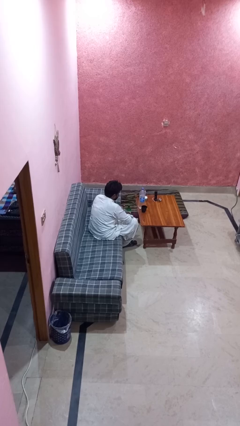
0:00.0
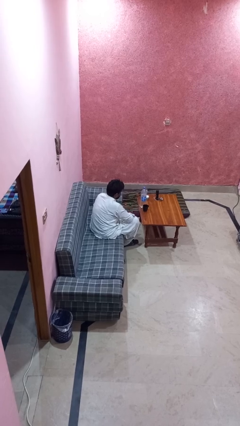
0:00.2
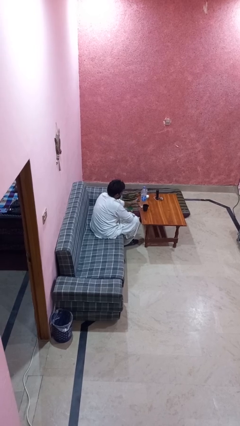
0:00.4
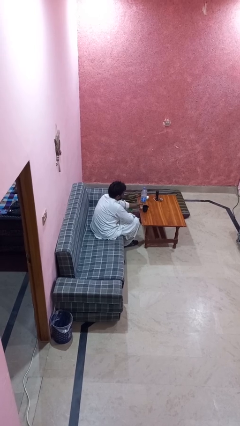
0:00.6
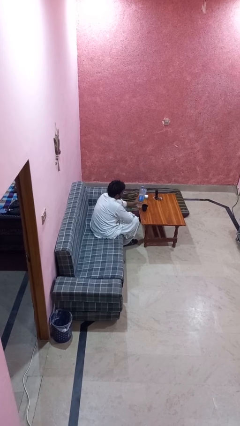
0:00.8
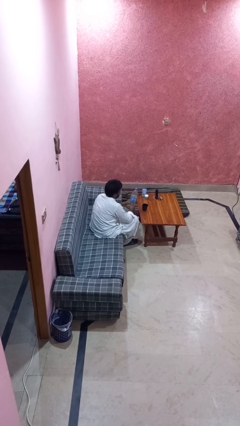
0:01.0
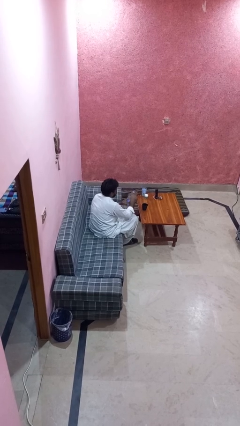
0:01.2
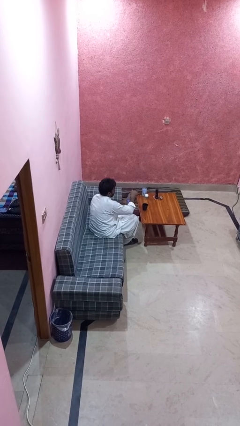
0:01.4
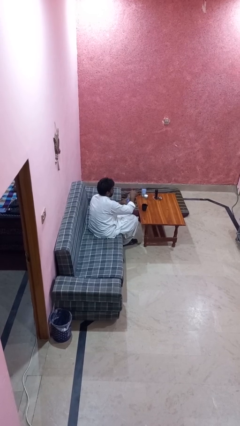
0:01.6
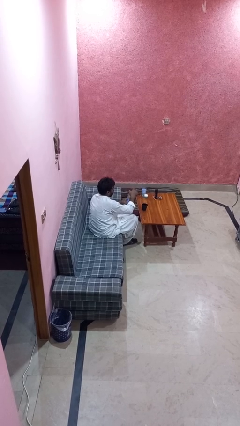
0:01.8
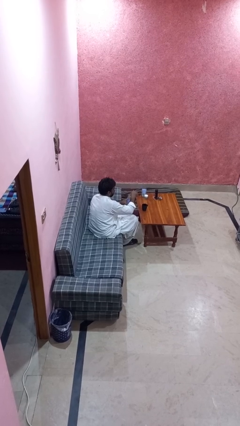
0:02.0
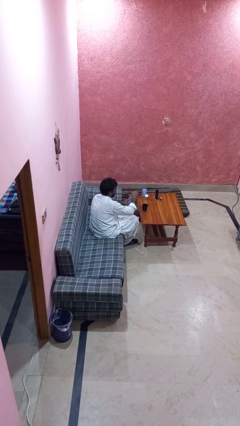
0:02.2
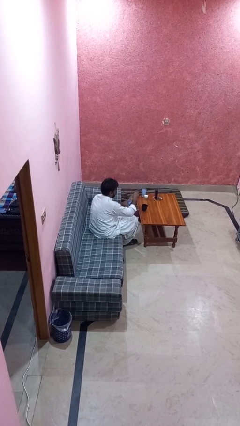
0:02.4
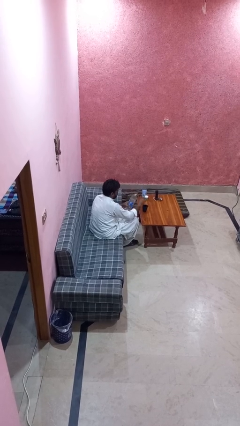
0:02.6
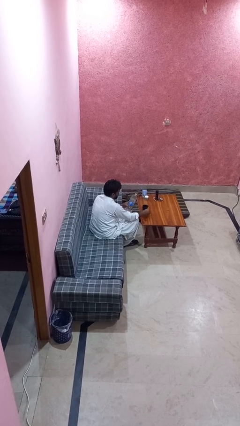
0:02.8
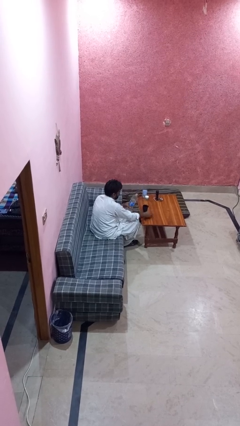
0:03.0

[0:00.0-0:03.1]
person unscrews lid from bottle

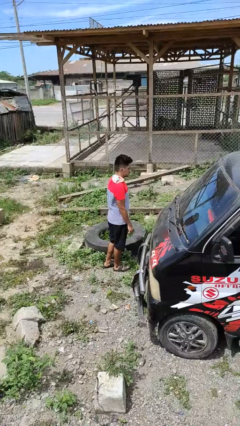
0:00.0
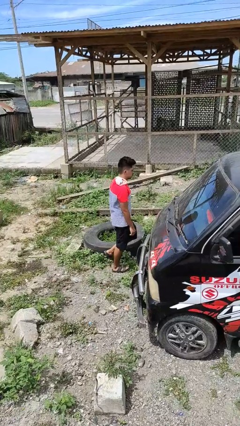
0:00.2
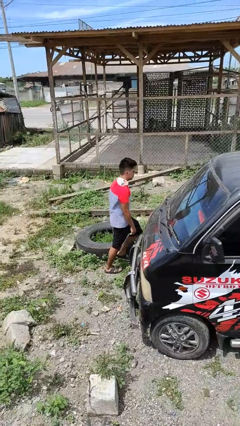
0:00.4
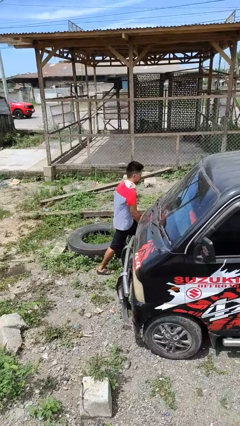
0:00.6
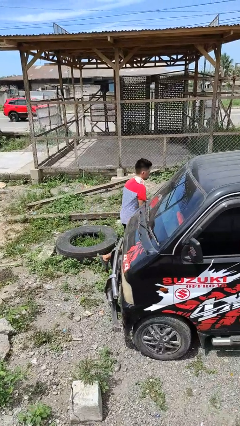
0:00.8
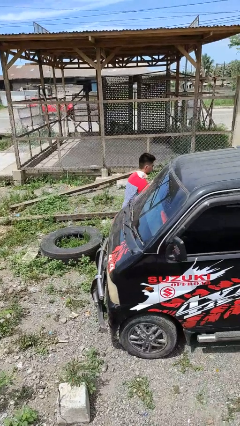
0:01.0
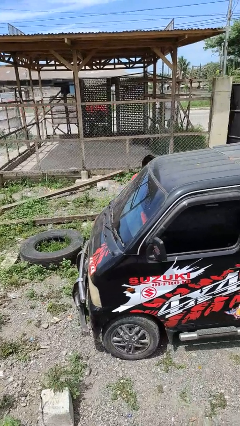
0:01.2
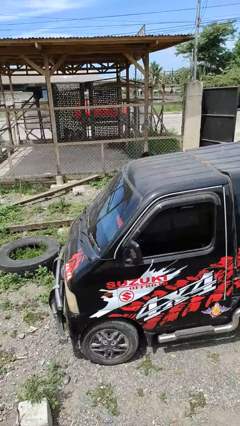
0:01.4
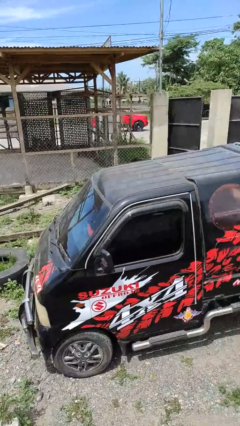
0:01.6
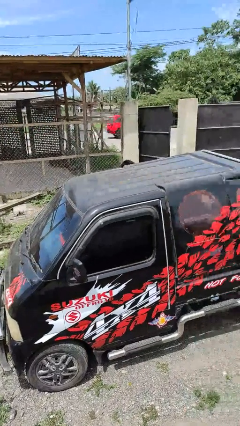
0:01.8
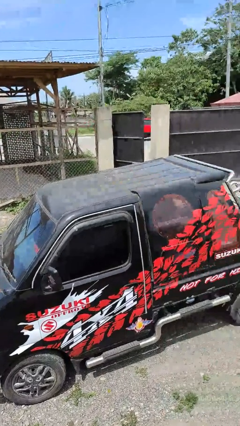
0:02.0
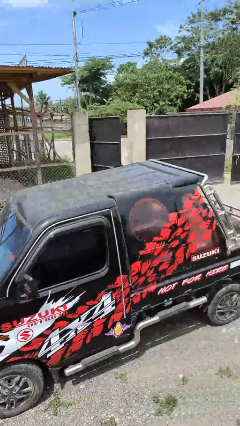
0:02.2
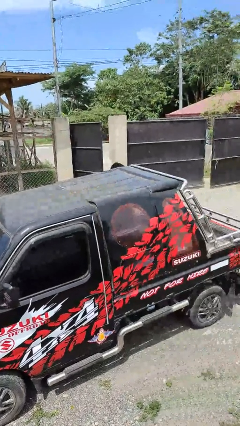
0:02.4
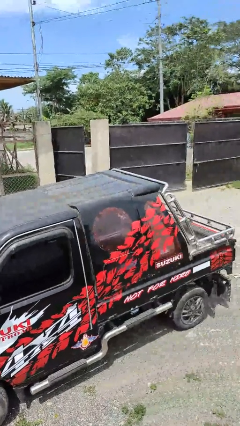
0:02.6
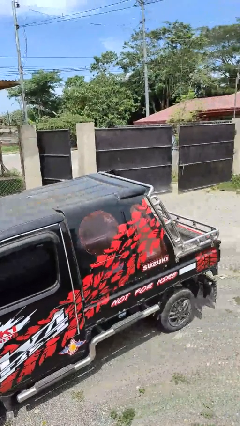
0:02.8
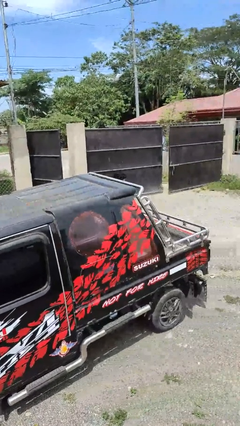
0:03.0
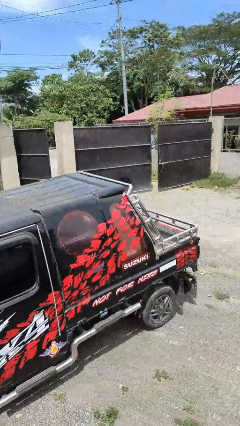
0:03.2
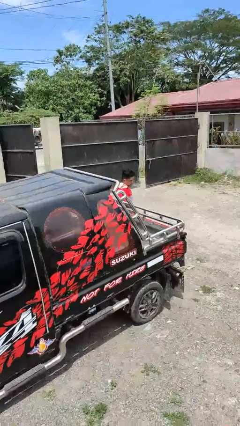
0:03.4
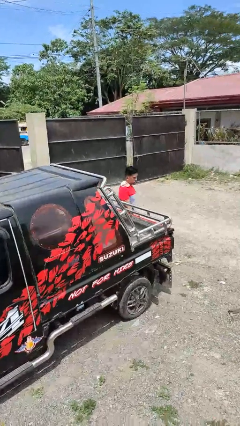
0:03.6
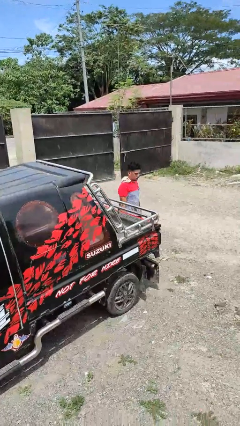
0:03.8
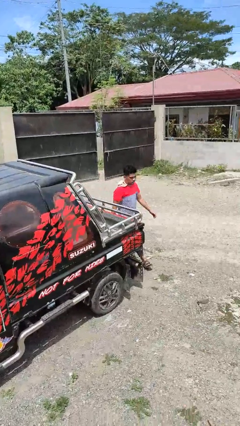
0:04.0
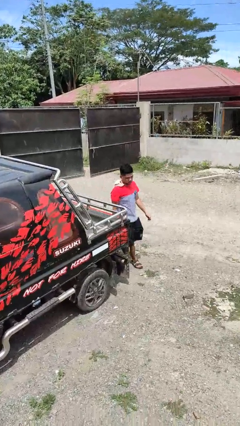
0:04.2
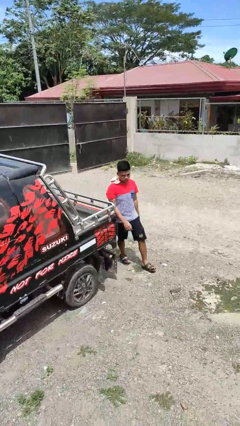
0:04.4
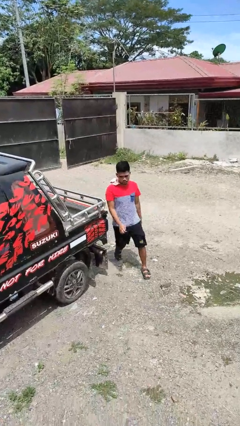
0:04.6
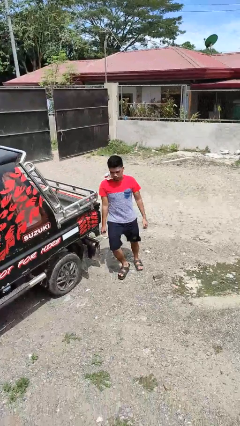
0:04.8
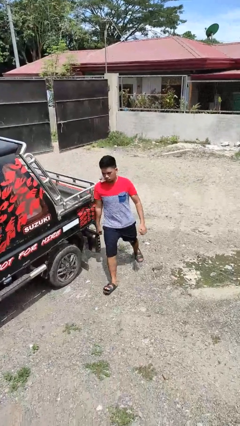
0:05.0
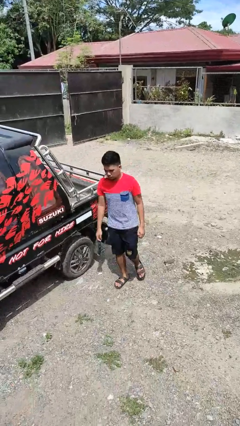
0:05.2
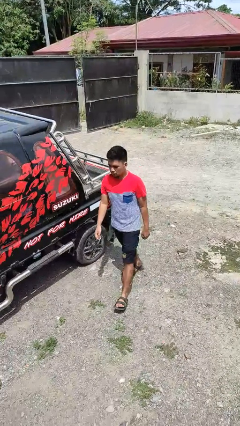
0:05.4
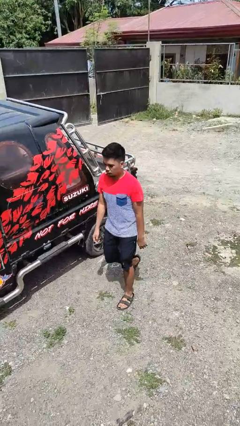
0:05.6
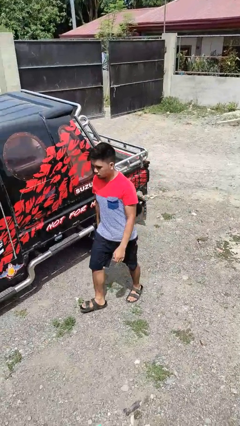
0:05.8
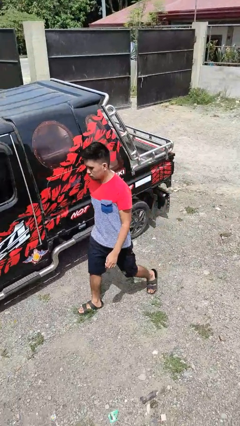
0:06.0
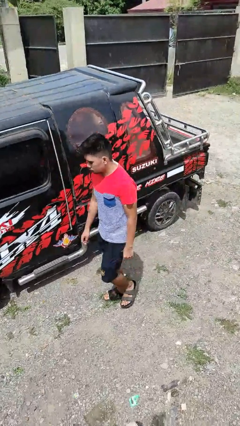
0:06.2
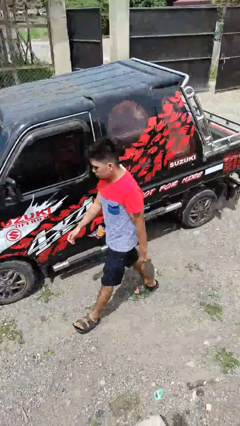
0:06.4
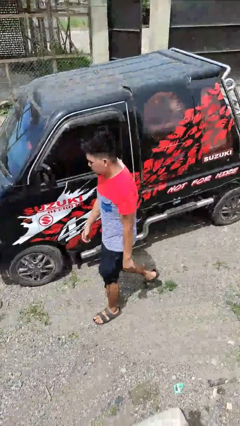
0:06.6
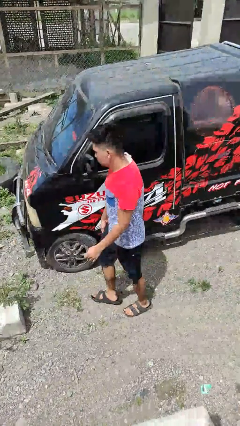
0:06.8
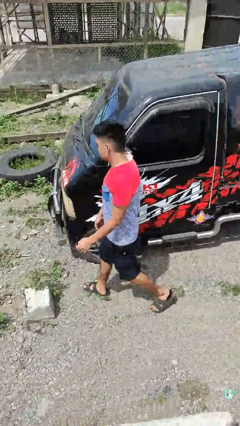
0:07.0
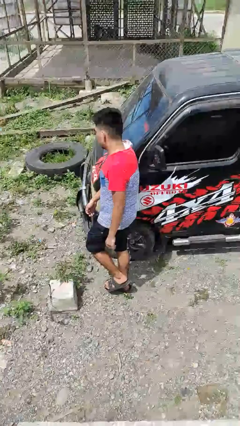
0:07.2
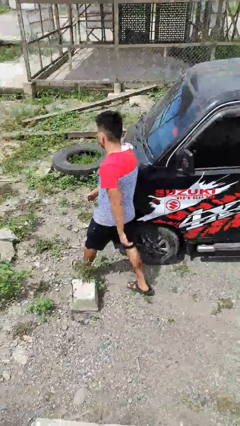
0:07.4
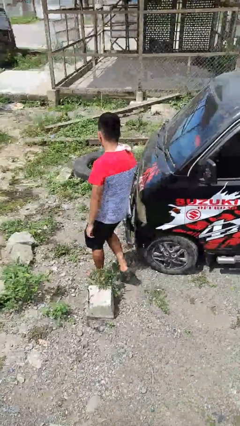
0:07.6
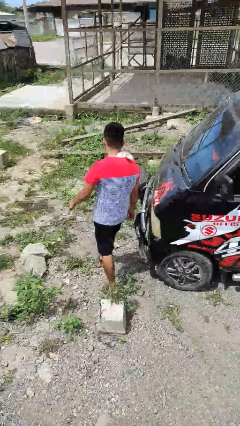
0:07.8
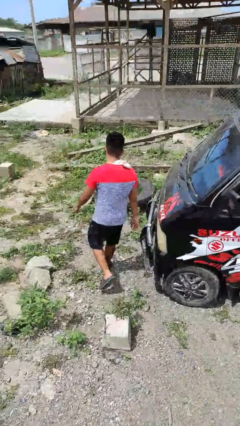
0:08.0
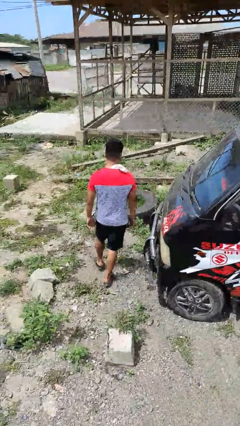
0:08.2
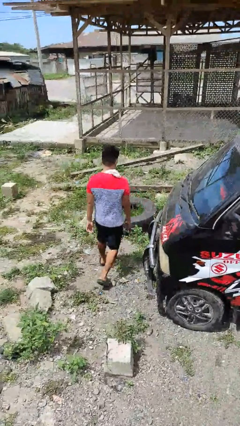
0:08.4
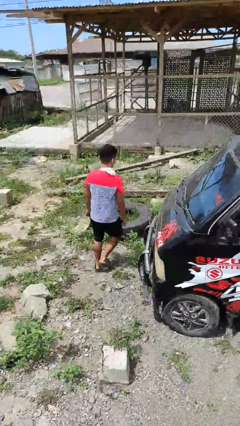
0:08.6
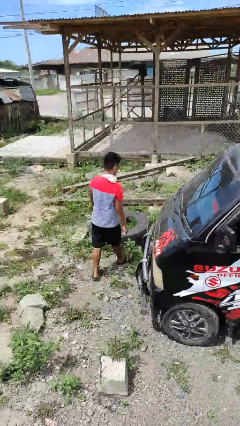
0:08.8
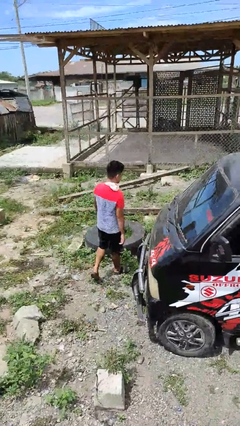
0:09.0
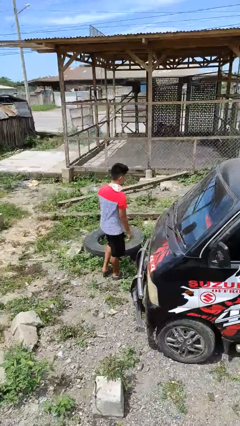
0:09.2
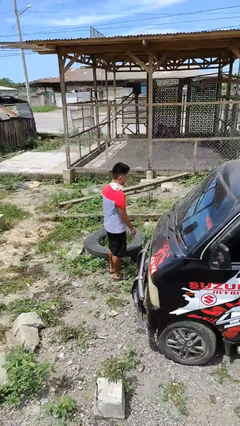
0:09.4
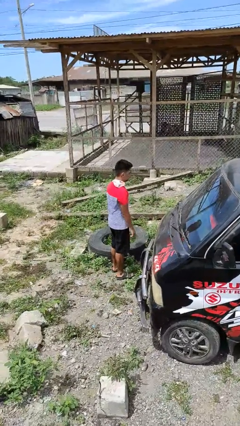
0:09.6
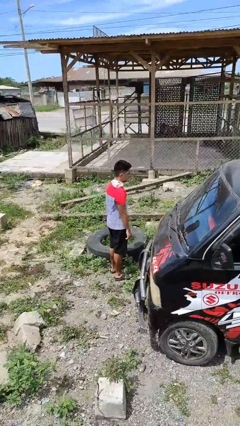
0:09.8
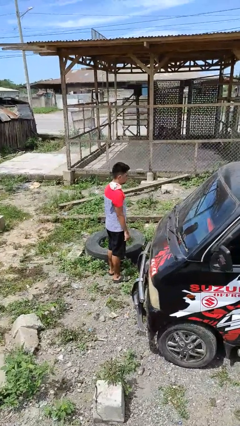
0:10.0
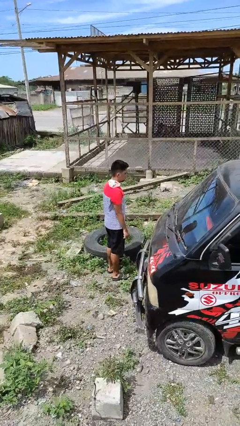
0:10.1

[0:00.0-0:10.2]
person walks around car

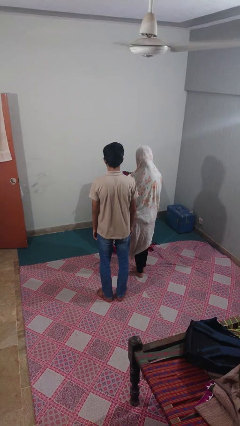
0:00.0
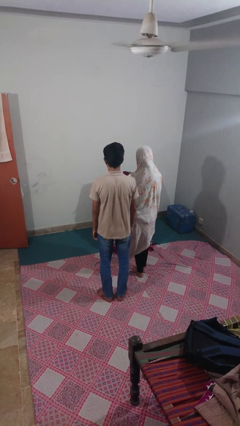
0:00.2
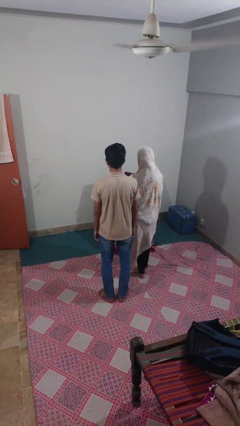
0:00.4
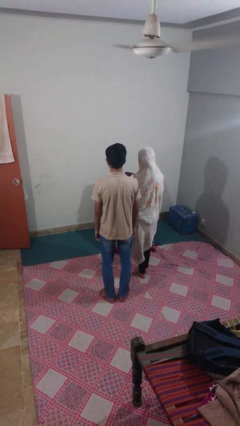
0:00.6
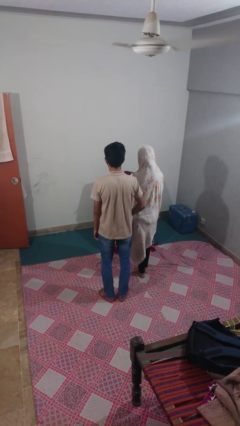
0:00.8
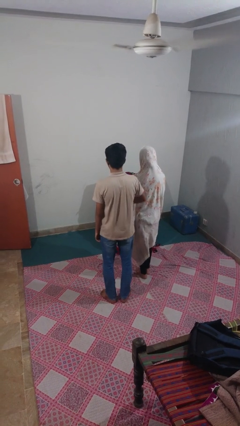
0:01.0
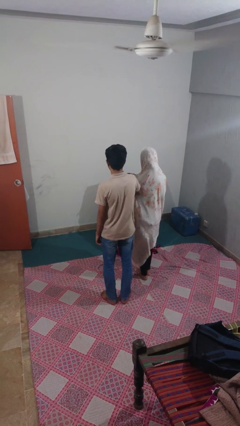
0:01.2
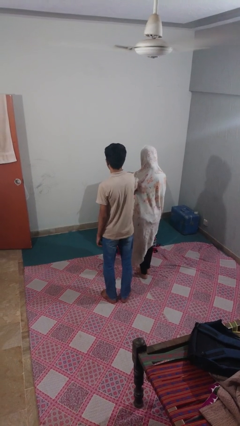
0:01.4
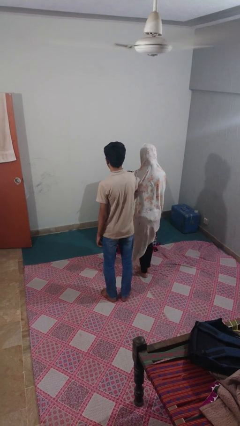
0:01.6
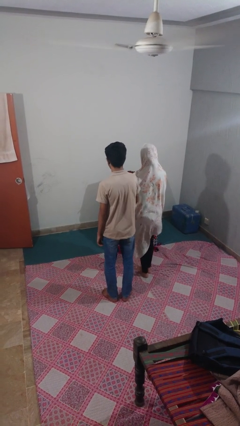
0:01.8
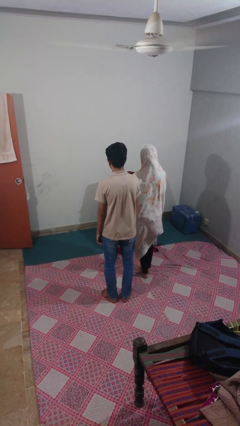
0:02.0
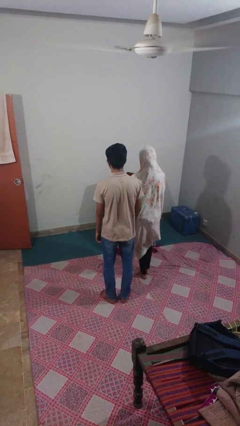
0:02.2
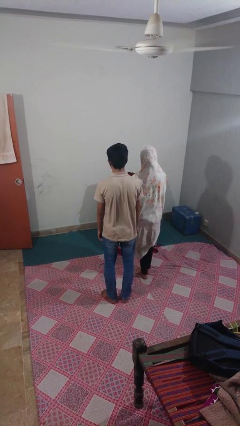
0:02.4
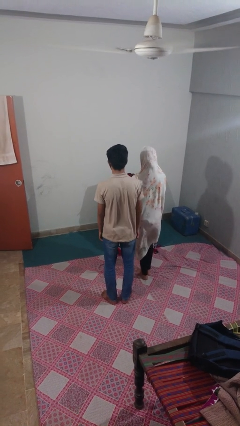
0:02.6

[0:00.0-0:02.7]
person nudges person with elbow

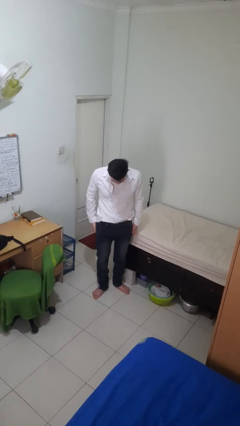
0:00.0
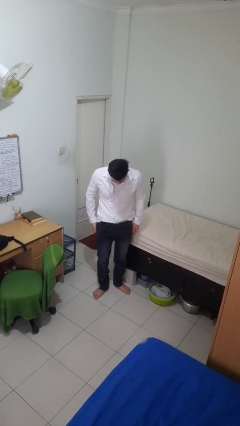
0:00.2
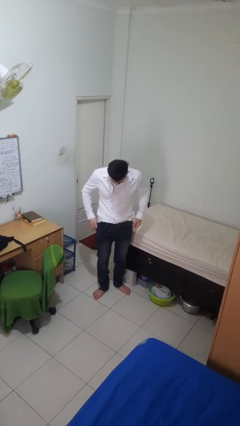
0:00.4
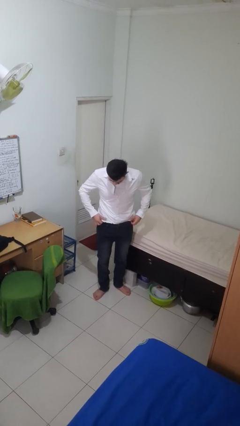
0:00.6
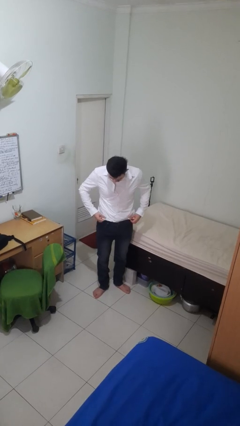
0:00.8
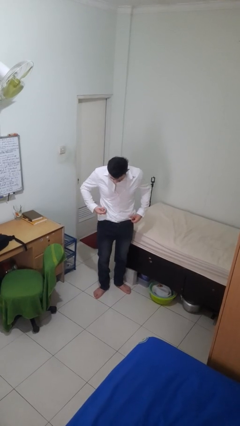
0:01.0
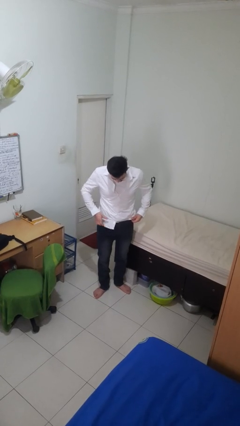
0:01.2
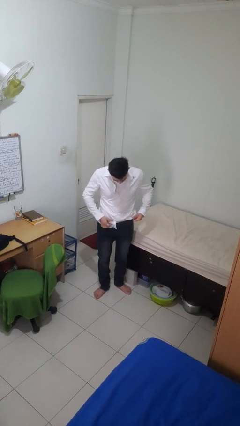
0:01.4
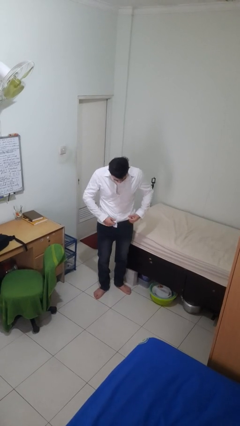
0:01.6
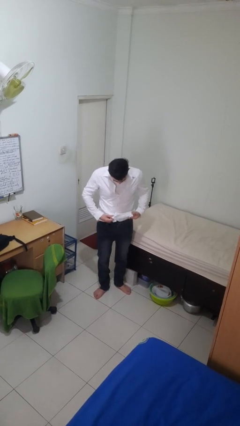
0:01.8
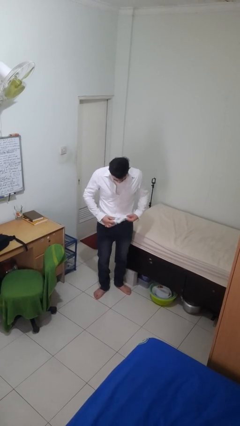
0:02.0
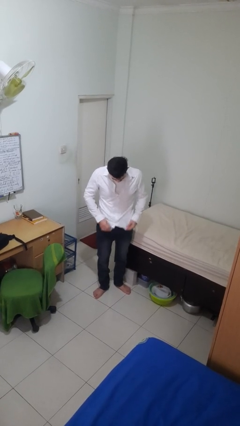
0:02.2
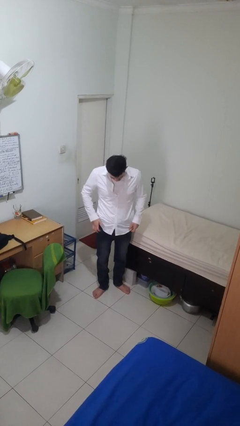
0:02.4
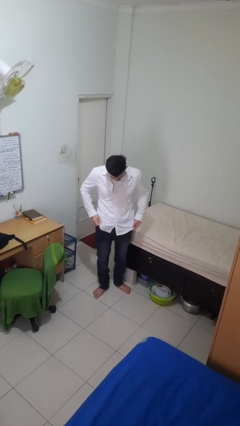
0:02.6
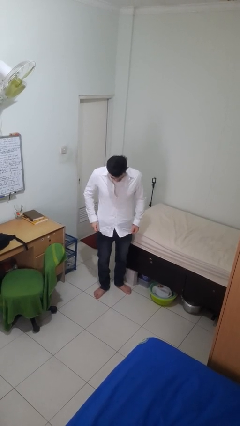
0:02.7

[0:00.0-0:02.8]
person untucks shirt
